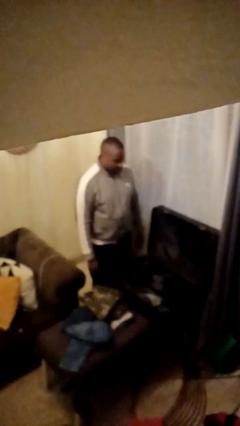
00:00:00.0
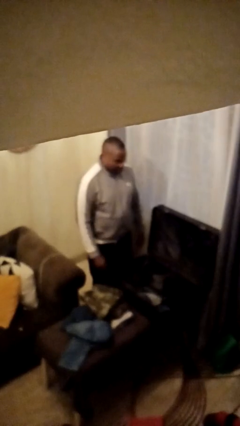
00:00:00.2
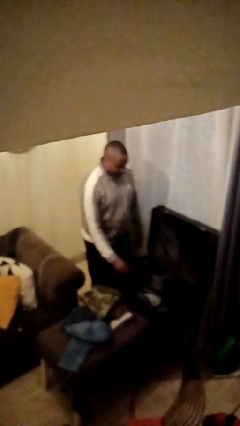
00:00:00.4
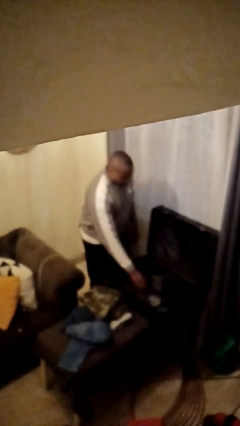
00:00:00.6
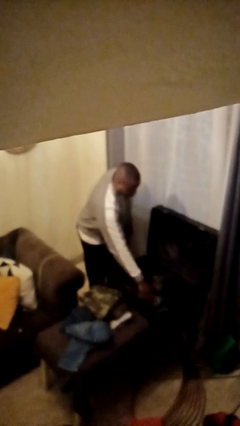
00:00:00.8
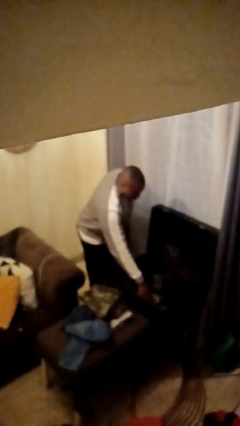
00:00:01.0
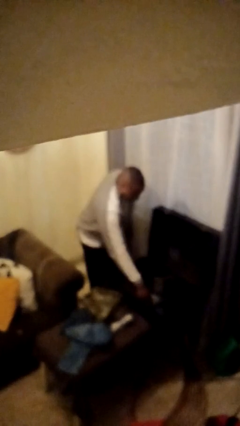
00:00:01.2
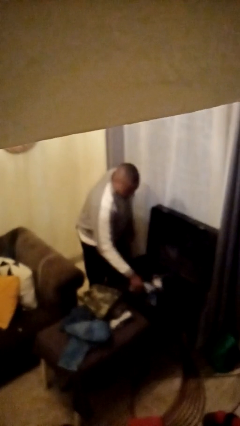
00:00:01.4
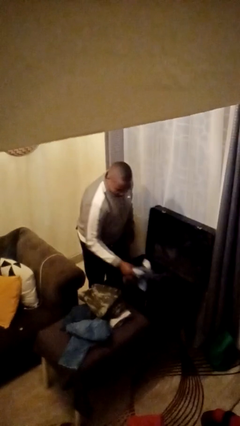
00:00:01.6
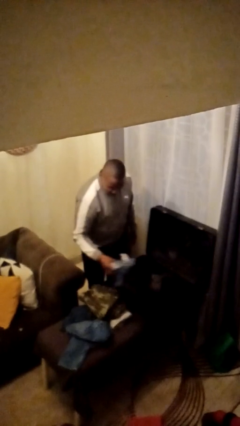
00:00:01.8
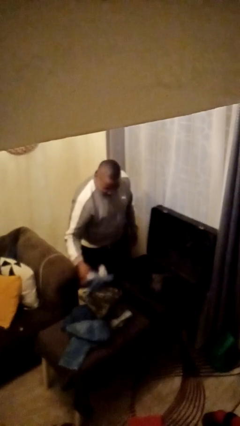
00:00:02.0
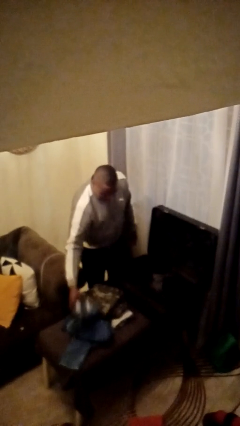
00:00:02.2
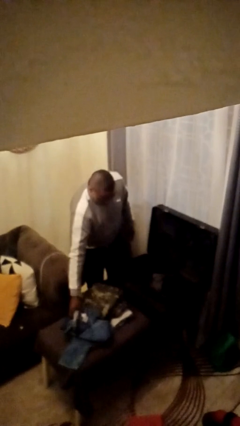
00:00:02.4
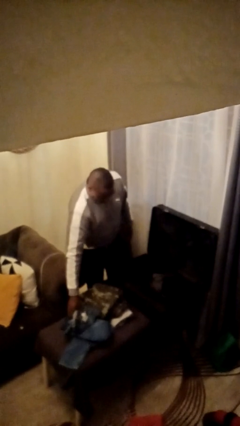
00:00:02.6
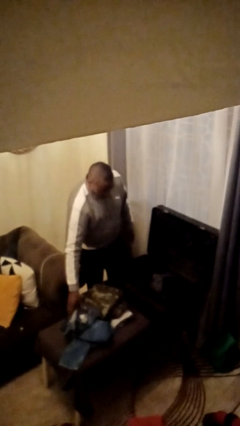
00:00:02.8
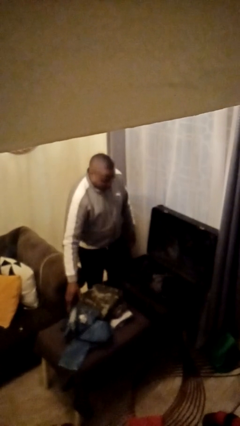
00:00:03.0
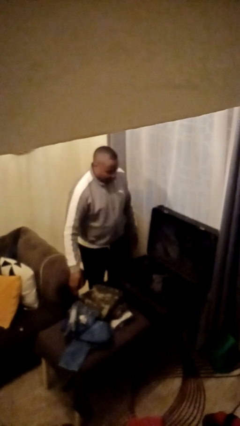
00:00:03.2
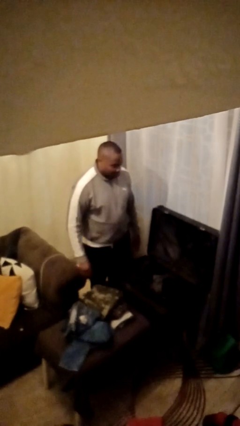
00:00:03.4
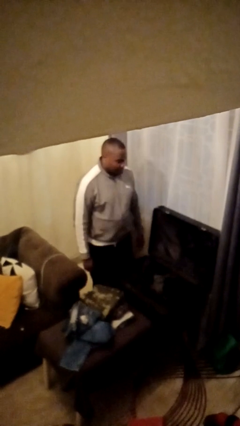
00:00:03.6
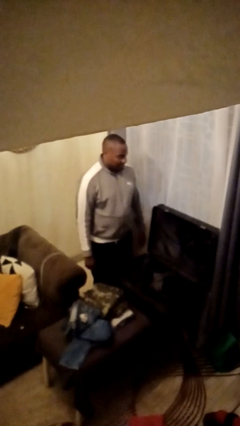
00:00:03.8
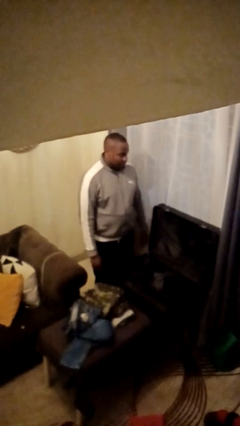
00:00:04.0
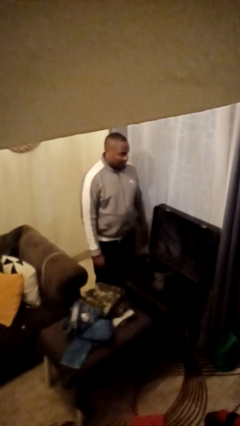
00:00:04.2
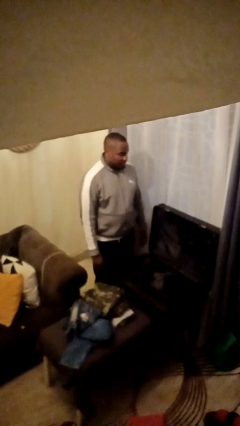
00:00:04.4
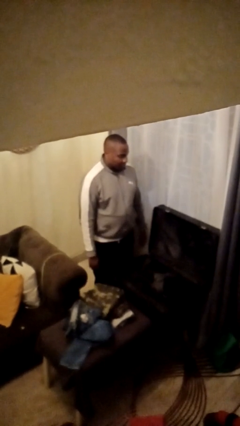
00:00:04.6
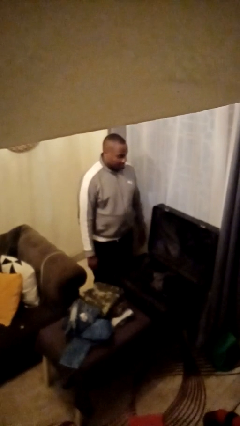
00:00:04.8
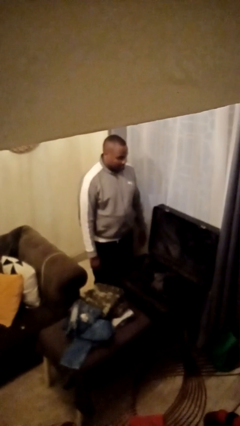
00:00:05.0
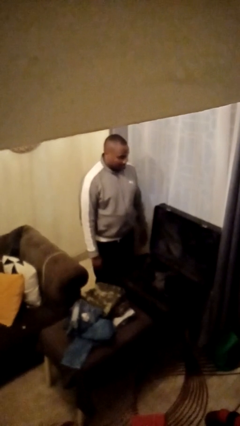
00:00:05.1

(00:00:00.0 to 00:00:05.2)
person unloads clothes from suitcase

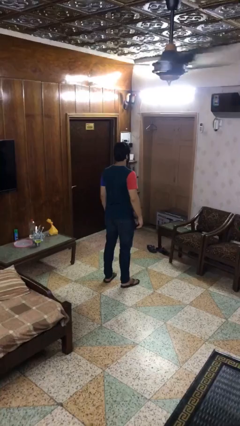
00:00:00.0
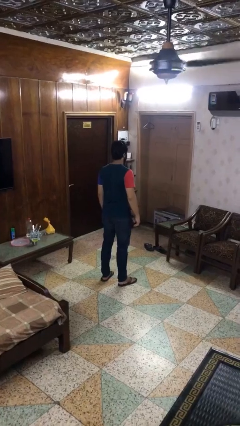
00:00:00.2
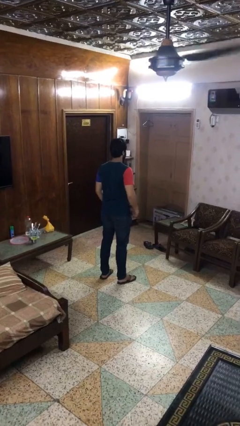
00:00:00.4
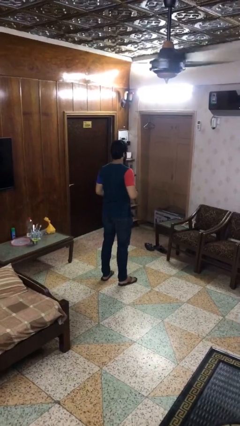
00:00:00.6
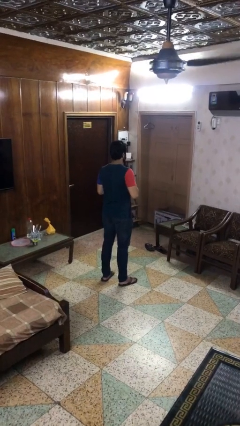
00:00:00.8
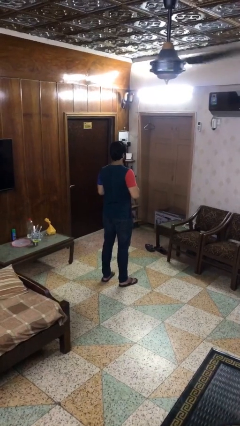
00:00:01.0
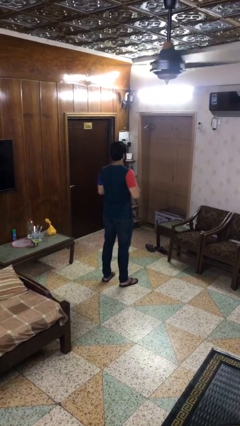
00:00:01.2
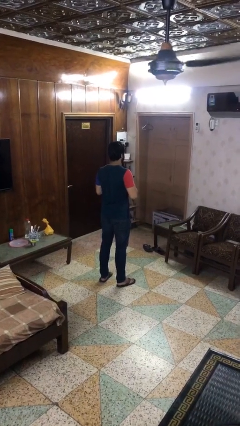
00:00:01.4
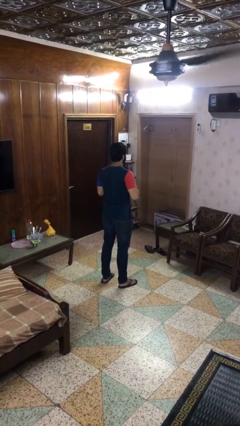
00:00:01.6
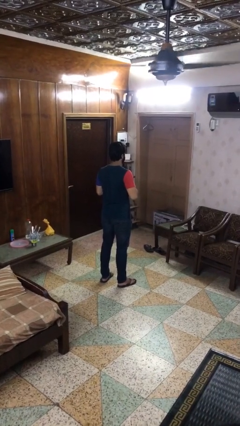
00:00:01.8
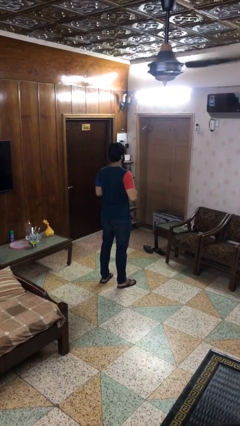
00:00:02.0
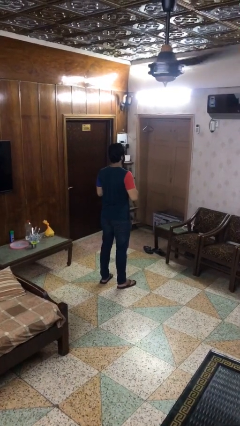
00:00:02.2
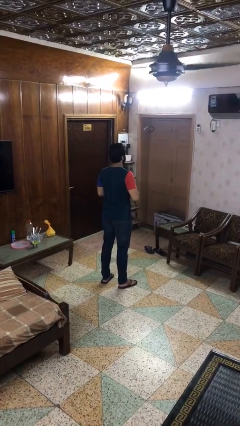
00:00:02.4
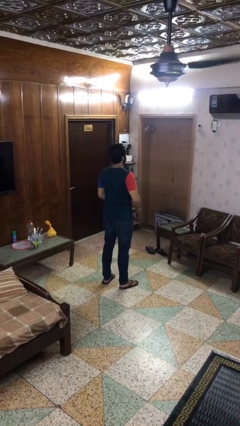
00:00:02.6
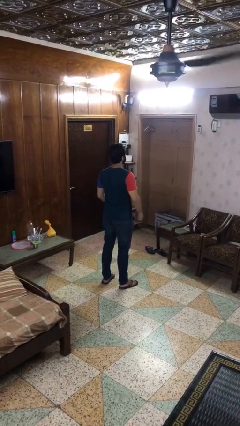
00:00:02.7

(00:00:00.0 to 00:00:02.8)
person buttons shirt

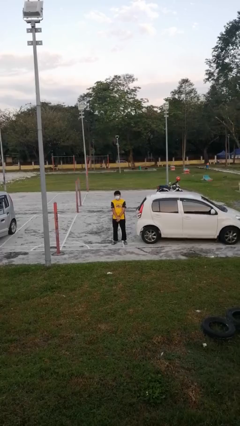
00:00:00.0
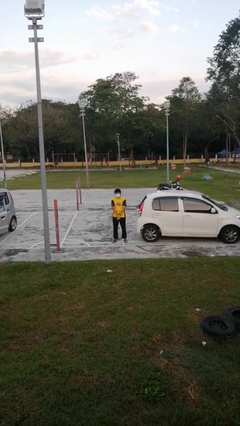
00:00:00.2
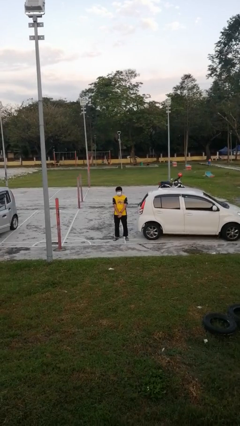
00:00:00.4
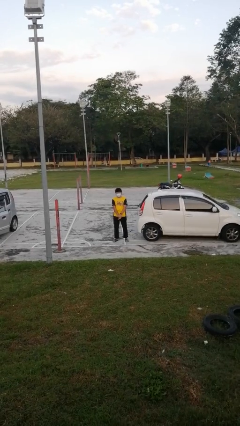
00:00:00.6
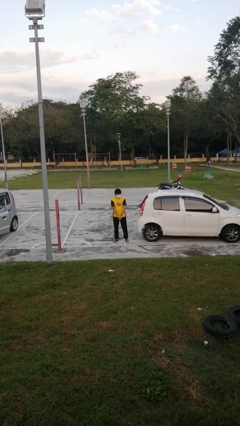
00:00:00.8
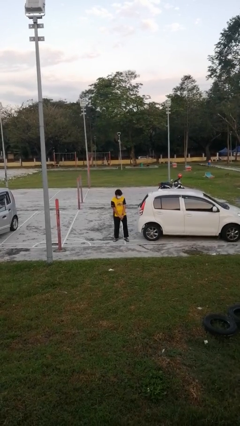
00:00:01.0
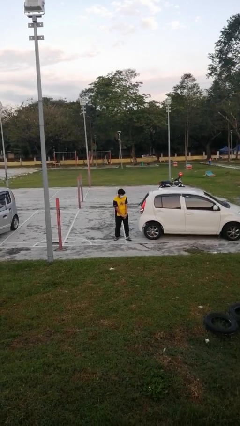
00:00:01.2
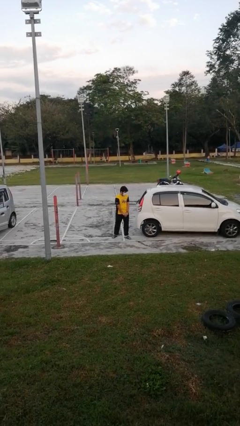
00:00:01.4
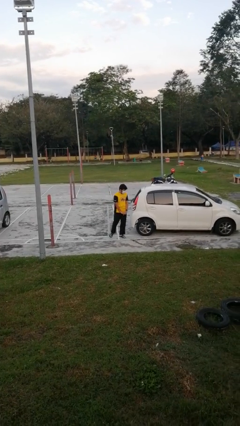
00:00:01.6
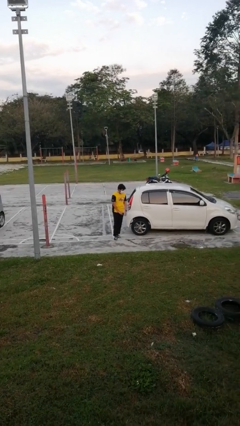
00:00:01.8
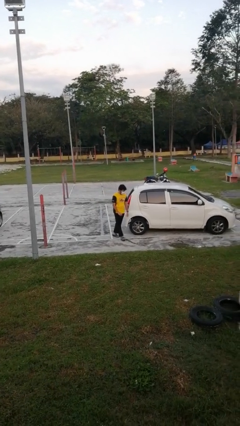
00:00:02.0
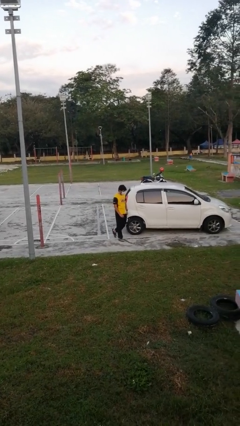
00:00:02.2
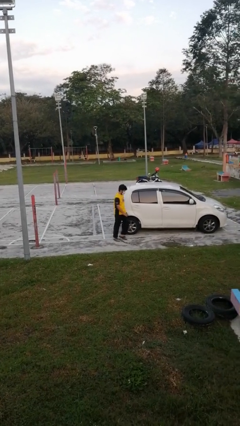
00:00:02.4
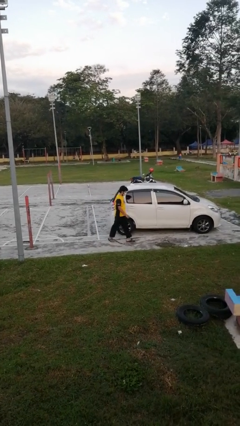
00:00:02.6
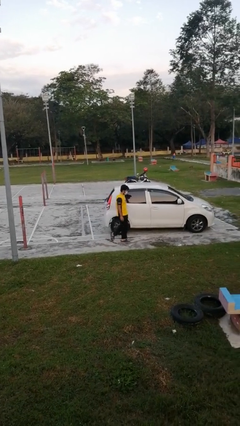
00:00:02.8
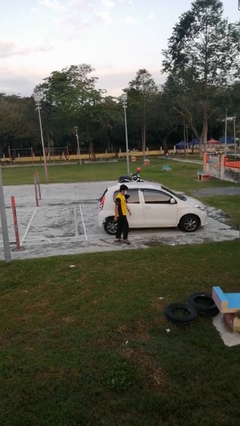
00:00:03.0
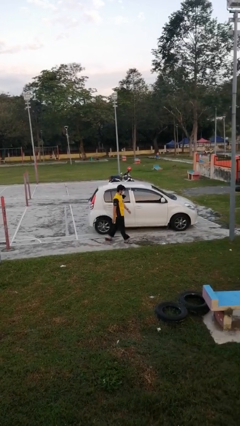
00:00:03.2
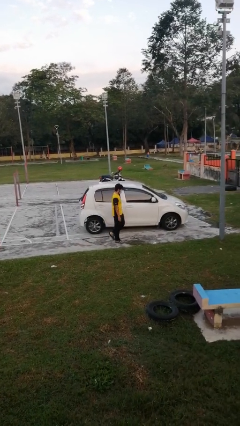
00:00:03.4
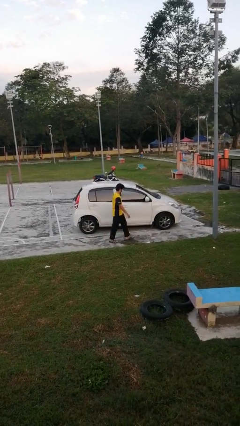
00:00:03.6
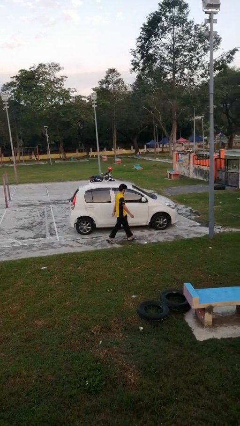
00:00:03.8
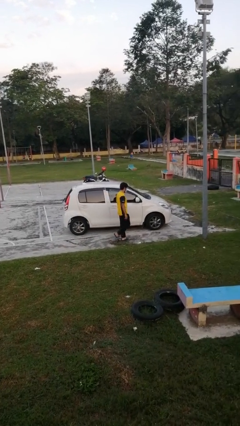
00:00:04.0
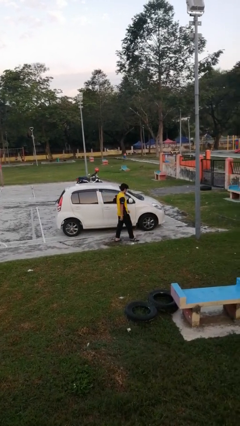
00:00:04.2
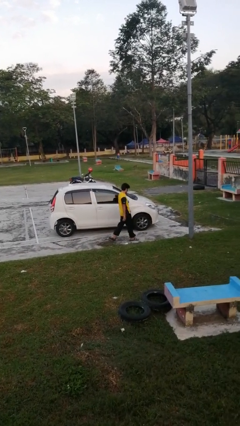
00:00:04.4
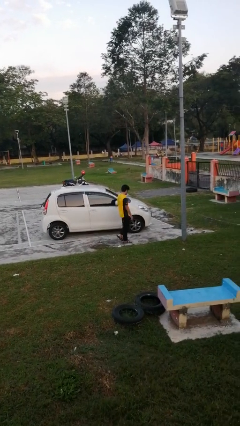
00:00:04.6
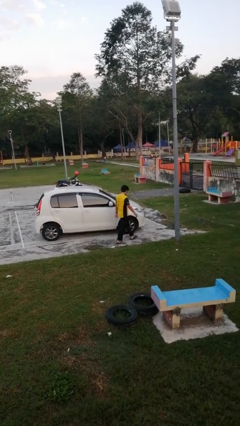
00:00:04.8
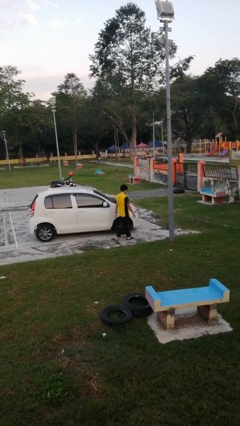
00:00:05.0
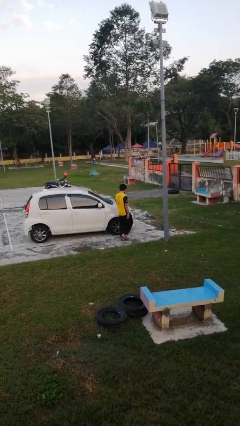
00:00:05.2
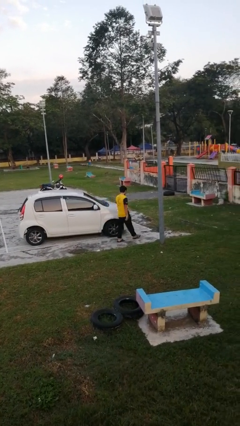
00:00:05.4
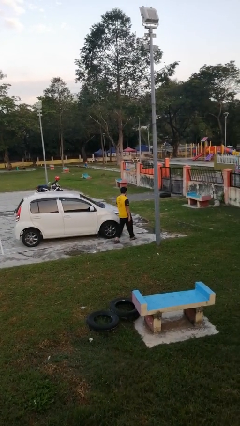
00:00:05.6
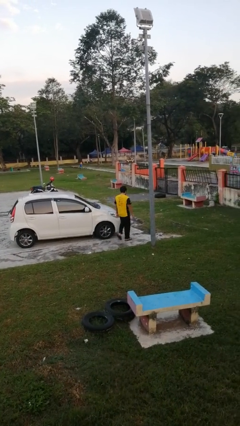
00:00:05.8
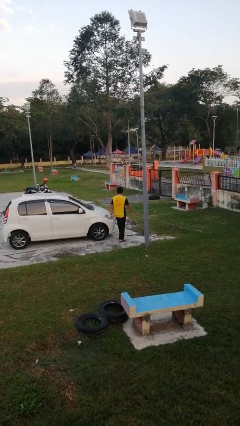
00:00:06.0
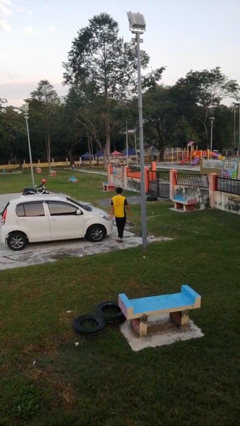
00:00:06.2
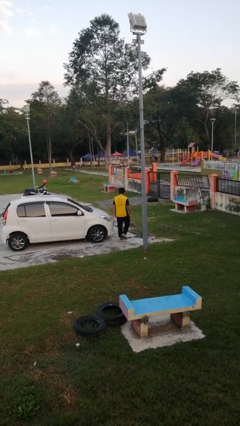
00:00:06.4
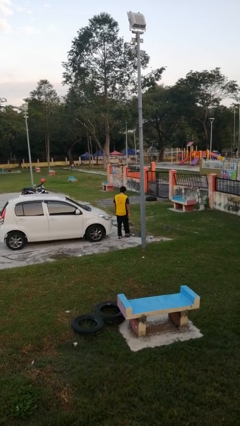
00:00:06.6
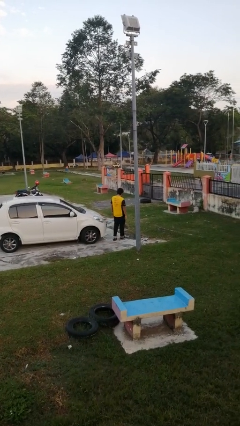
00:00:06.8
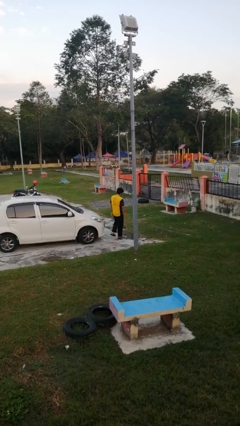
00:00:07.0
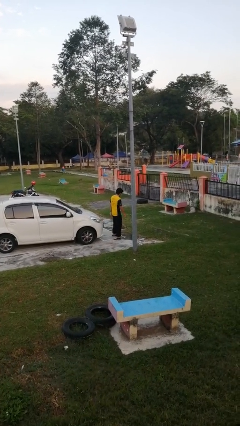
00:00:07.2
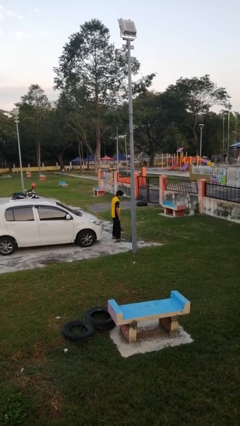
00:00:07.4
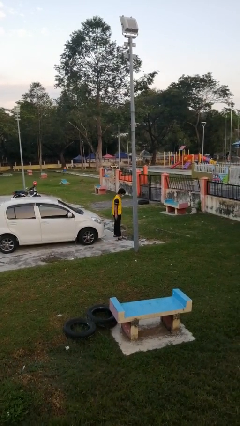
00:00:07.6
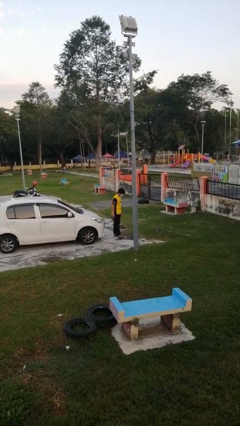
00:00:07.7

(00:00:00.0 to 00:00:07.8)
person walks around car

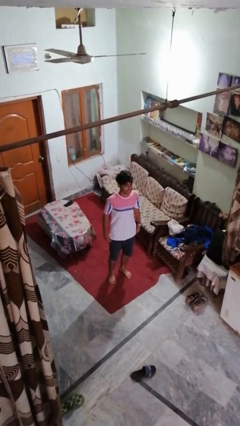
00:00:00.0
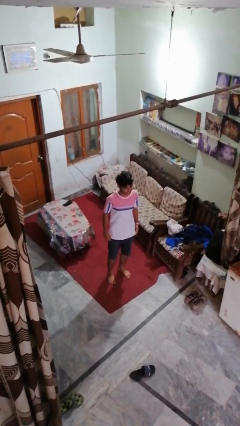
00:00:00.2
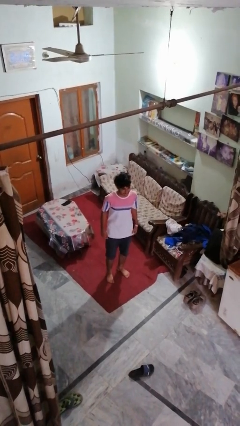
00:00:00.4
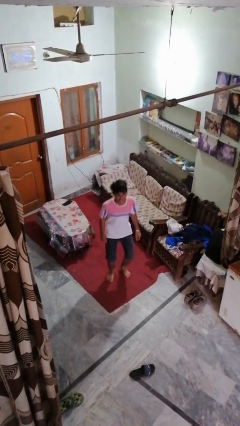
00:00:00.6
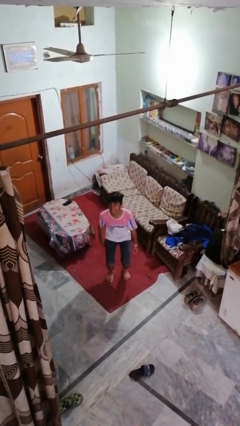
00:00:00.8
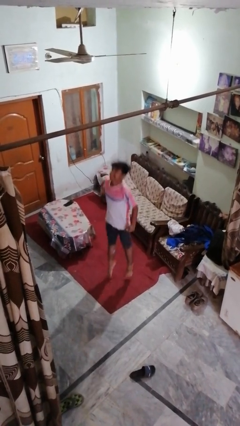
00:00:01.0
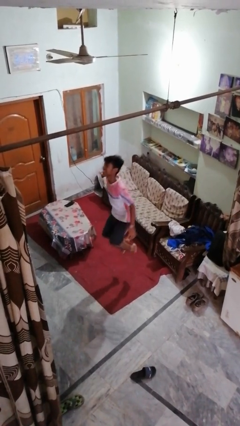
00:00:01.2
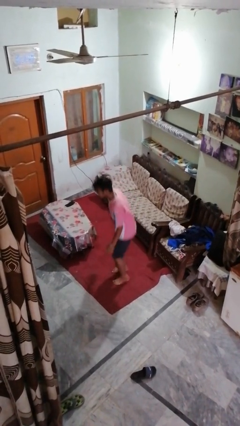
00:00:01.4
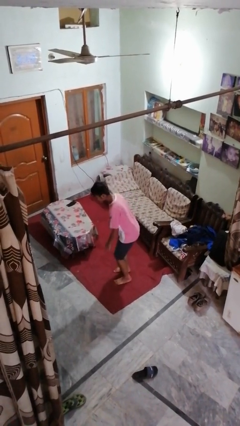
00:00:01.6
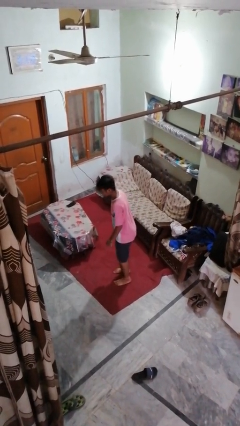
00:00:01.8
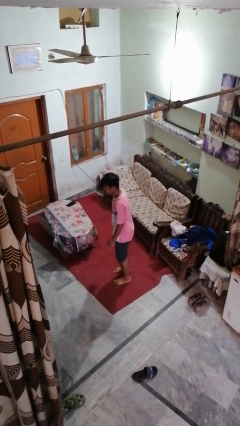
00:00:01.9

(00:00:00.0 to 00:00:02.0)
person jumps
